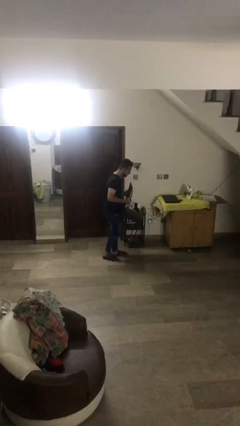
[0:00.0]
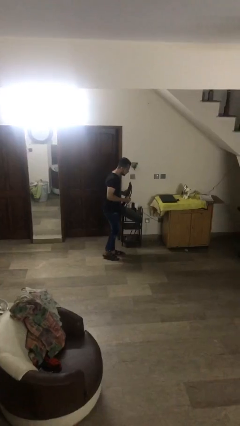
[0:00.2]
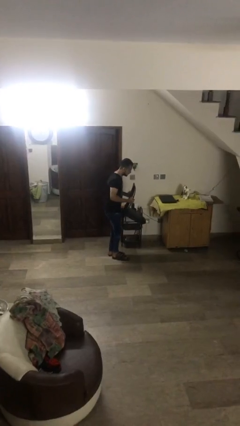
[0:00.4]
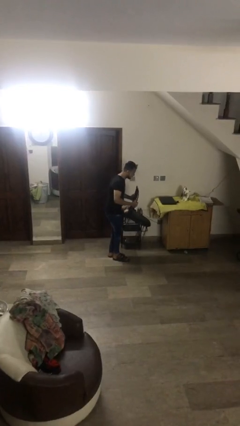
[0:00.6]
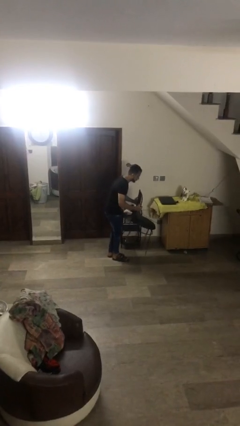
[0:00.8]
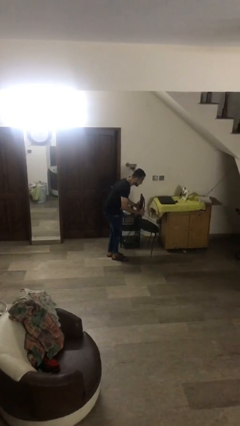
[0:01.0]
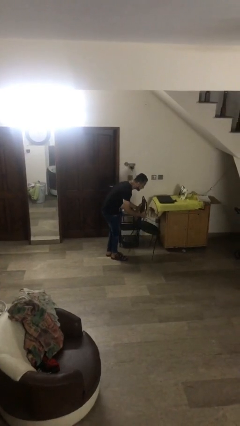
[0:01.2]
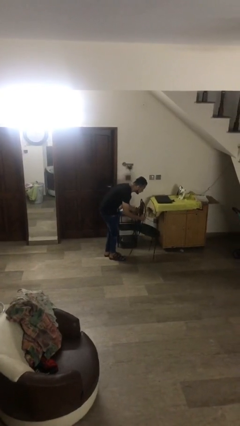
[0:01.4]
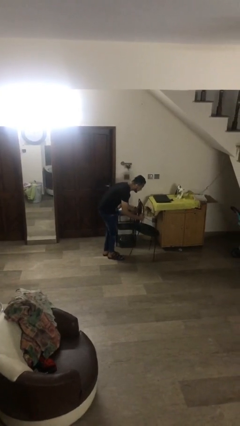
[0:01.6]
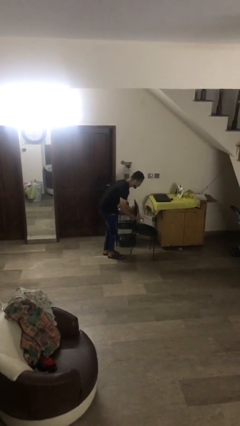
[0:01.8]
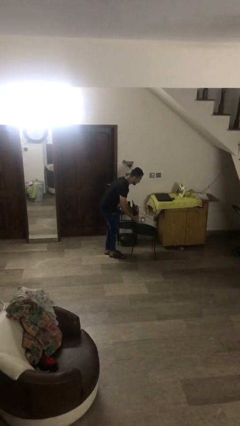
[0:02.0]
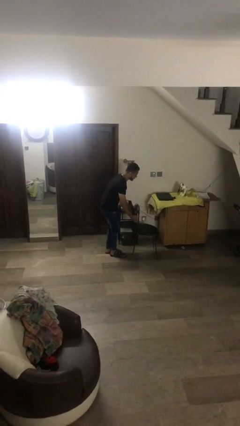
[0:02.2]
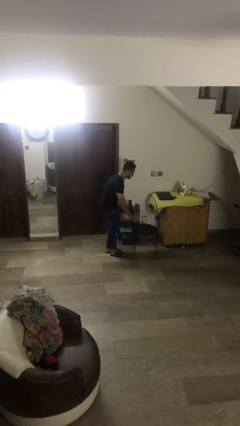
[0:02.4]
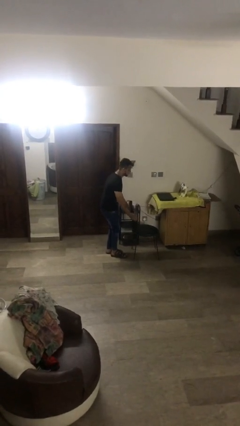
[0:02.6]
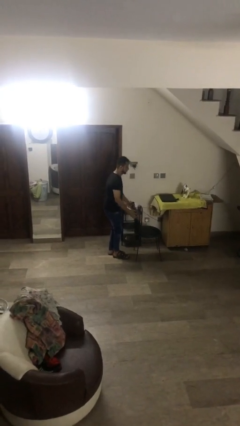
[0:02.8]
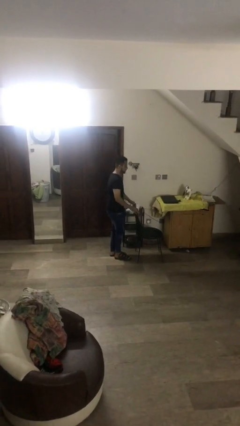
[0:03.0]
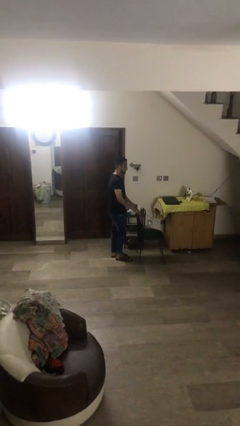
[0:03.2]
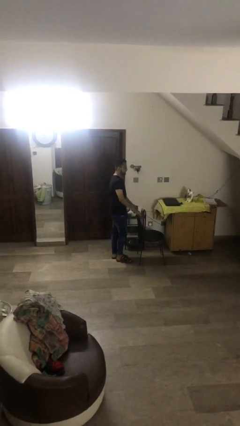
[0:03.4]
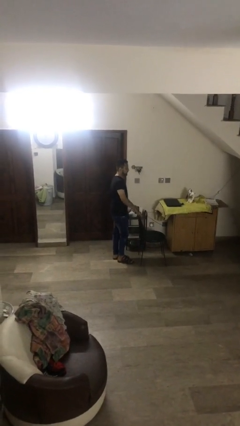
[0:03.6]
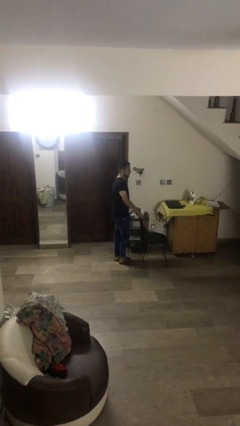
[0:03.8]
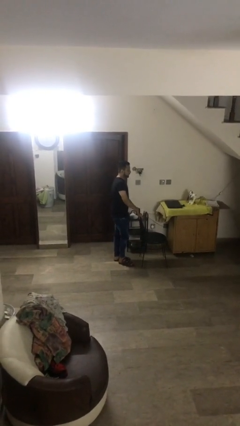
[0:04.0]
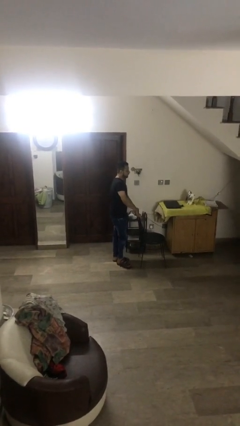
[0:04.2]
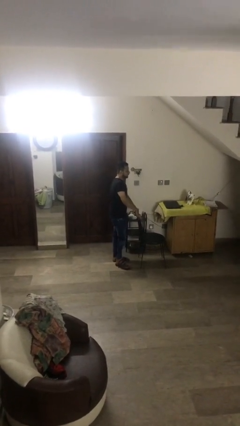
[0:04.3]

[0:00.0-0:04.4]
person puts down object on floor

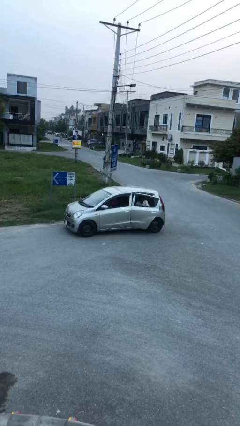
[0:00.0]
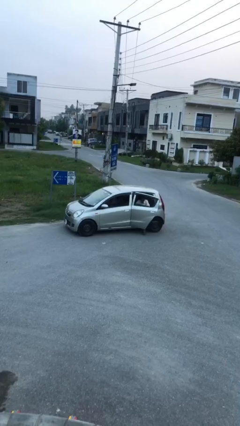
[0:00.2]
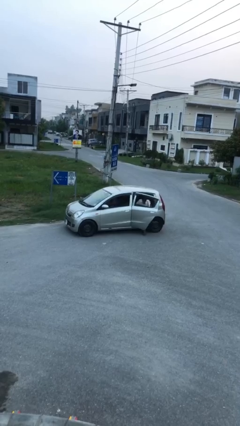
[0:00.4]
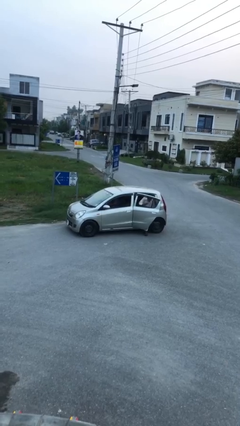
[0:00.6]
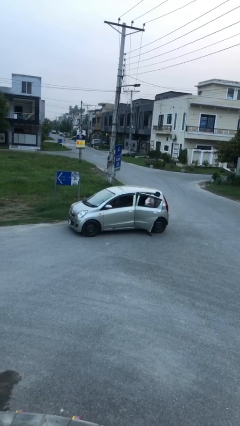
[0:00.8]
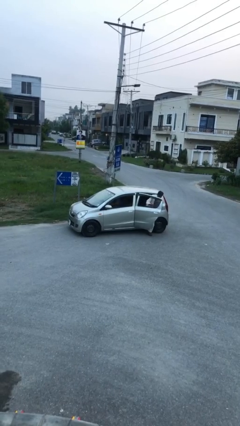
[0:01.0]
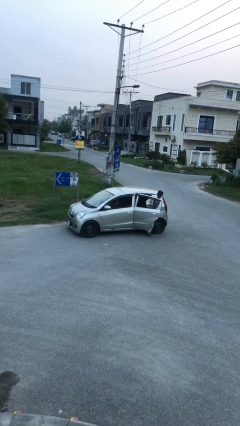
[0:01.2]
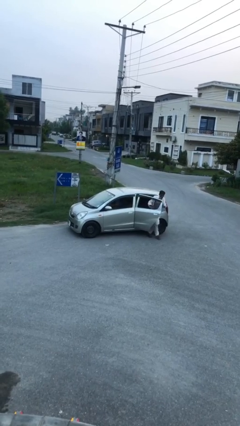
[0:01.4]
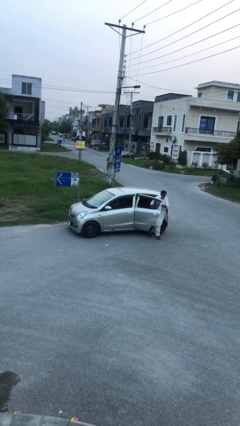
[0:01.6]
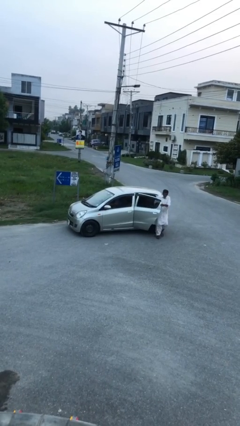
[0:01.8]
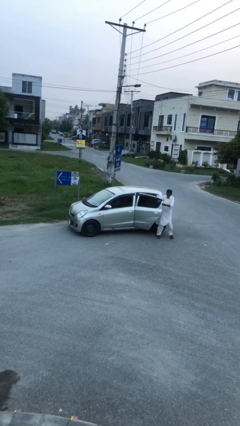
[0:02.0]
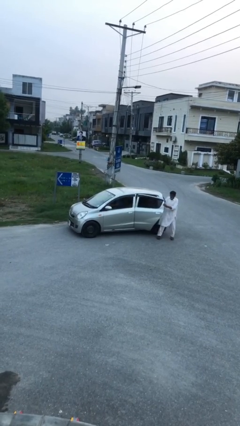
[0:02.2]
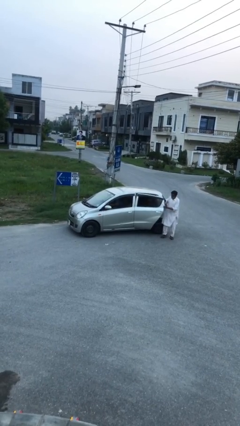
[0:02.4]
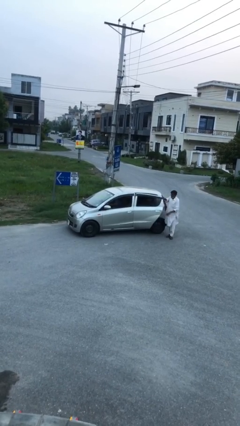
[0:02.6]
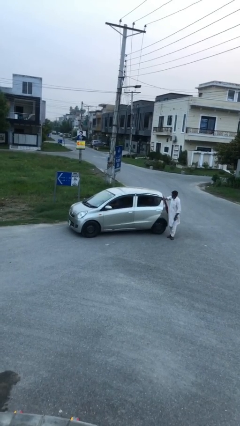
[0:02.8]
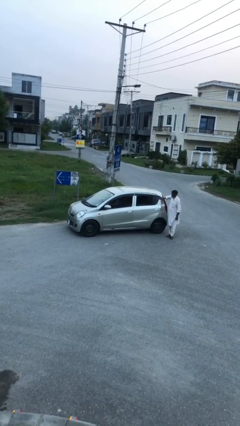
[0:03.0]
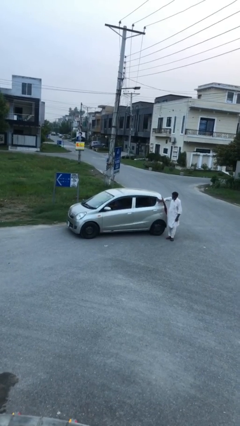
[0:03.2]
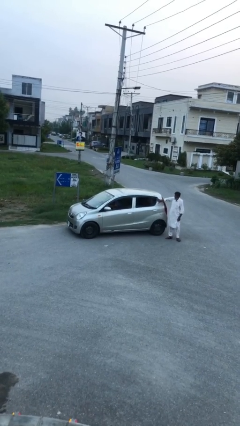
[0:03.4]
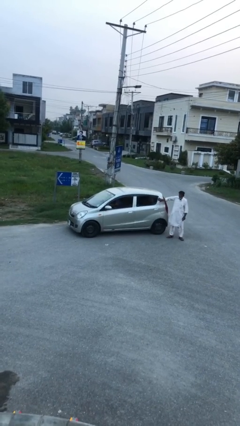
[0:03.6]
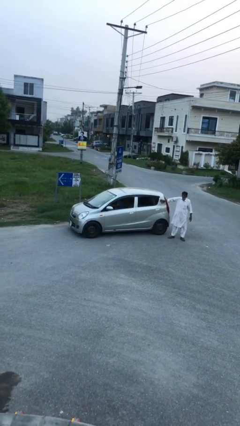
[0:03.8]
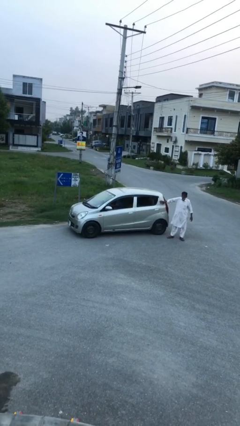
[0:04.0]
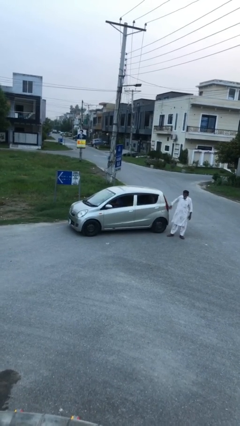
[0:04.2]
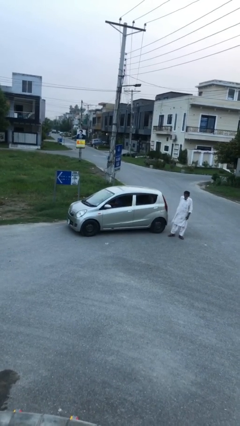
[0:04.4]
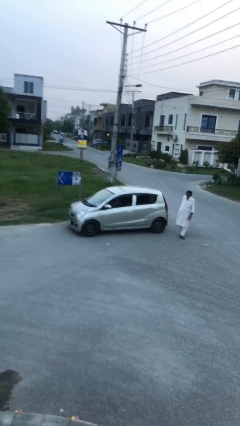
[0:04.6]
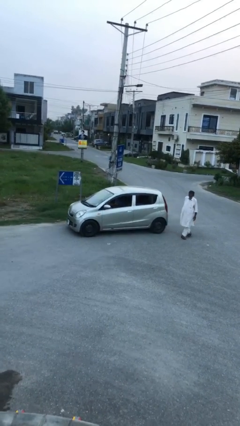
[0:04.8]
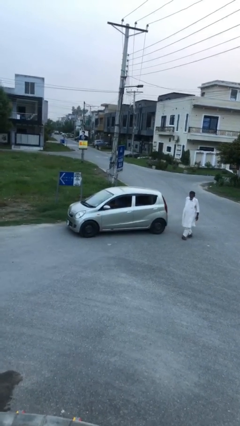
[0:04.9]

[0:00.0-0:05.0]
car drops off person

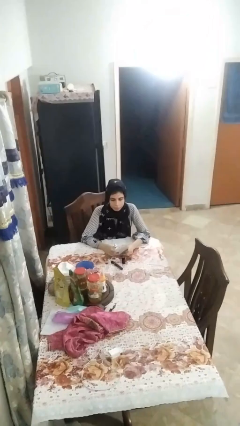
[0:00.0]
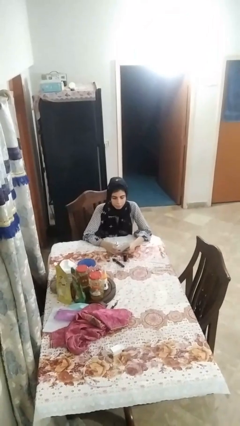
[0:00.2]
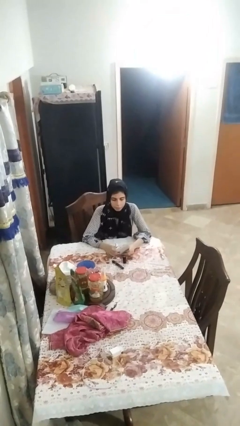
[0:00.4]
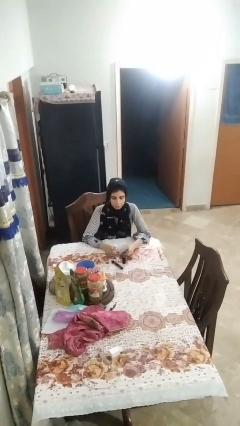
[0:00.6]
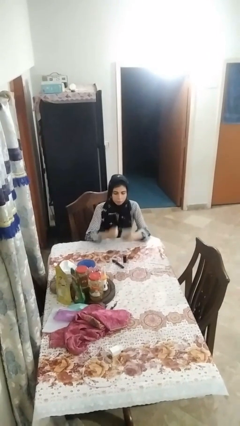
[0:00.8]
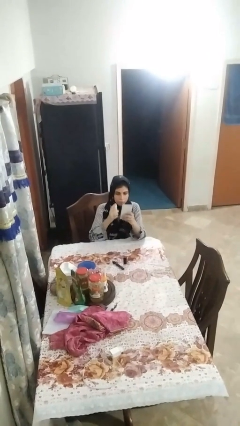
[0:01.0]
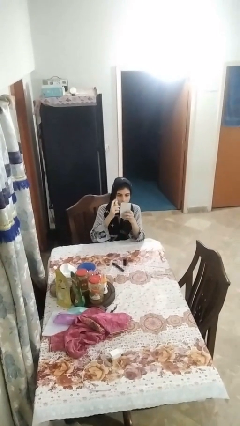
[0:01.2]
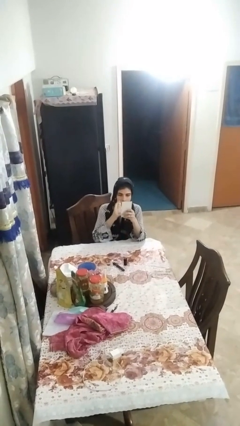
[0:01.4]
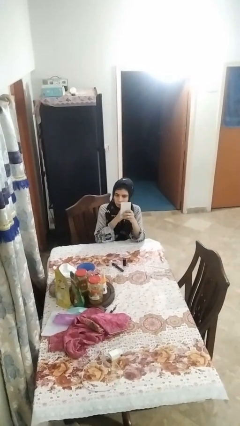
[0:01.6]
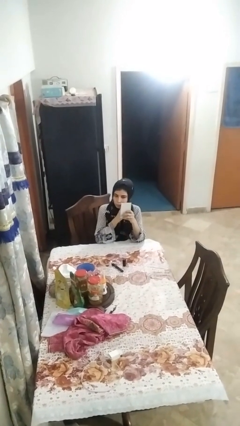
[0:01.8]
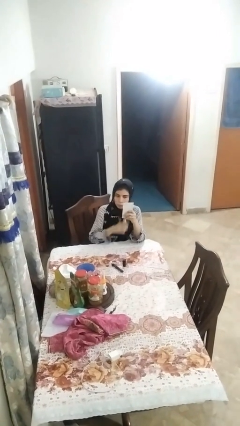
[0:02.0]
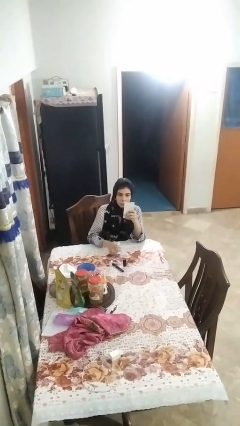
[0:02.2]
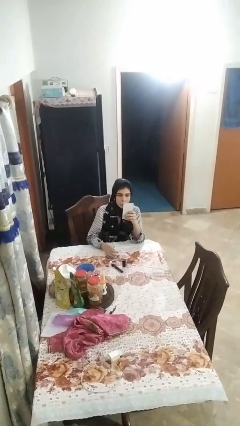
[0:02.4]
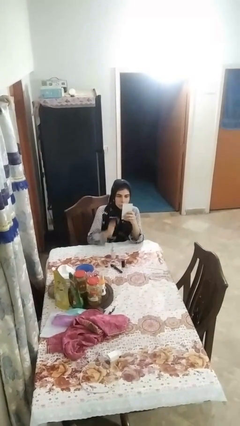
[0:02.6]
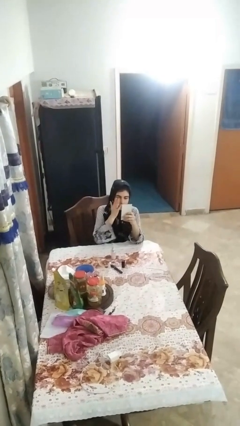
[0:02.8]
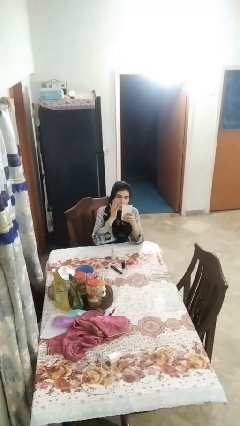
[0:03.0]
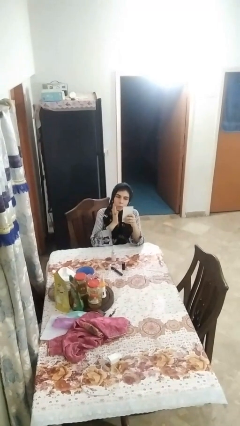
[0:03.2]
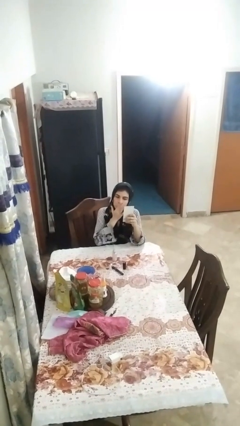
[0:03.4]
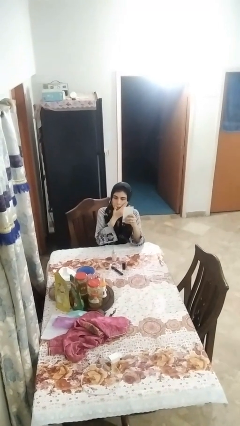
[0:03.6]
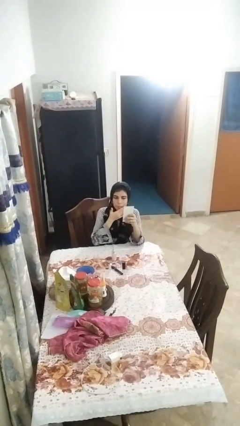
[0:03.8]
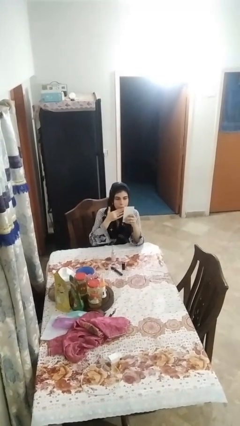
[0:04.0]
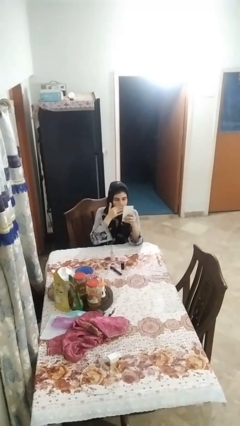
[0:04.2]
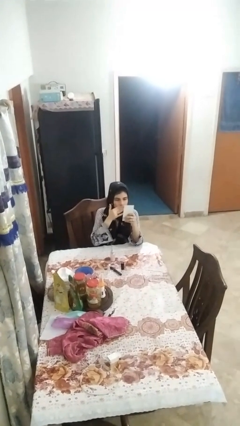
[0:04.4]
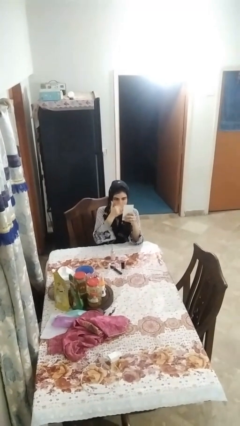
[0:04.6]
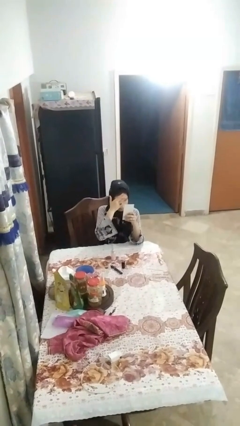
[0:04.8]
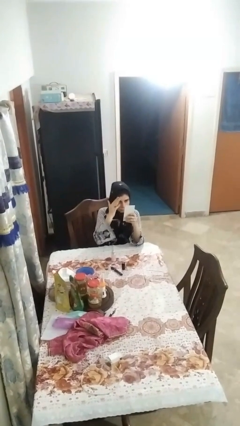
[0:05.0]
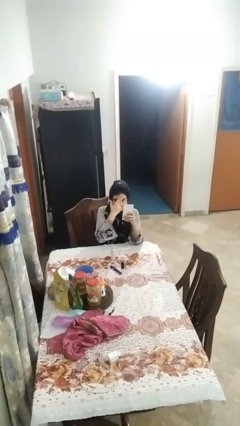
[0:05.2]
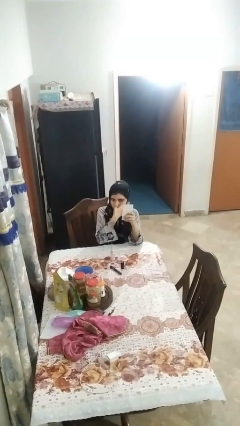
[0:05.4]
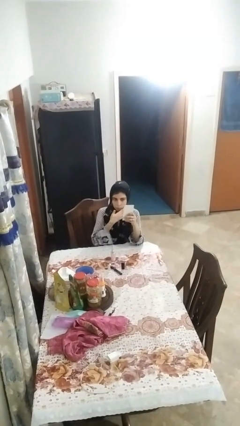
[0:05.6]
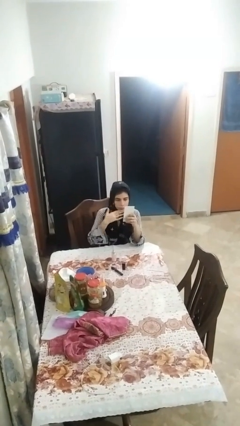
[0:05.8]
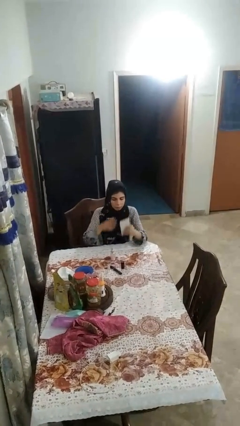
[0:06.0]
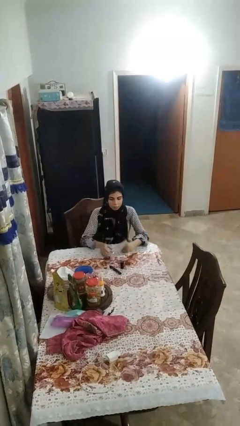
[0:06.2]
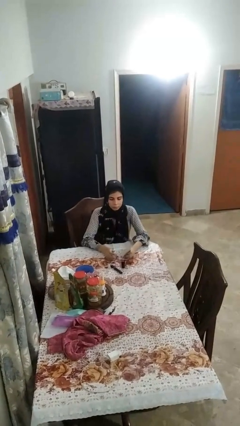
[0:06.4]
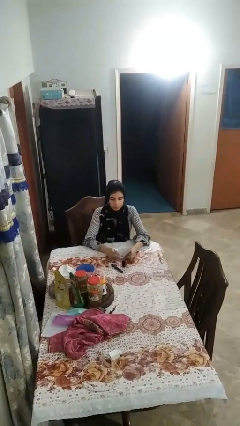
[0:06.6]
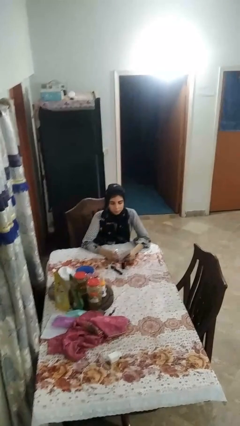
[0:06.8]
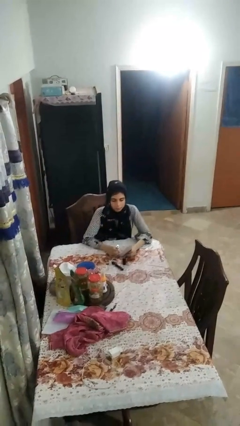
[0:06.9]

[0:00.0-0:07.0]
person applies foundation makeup

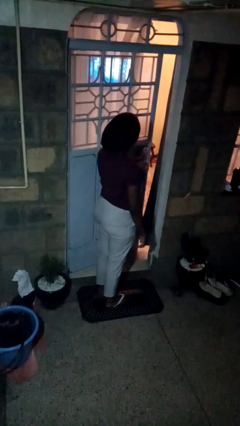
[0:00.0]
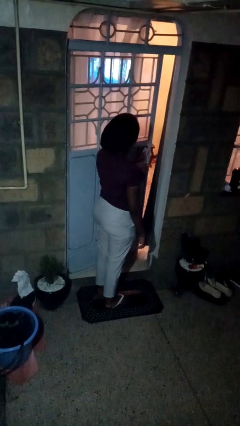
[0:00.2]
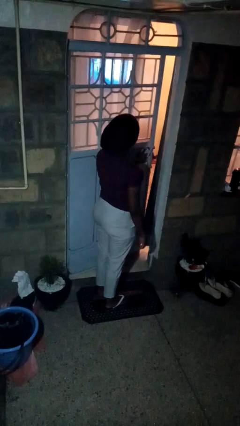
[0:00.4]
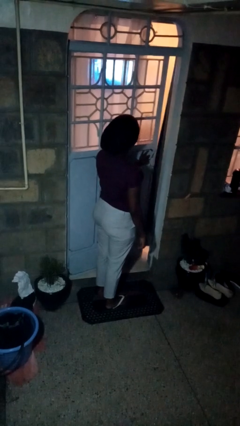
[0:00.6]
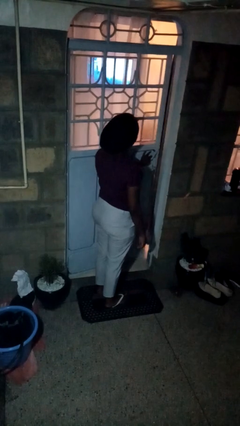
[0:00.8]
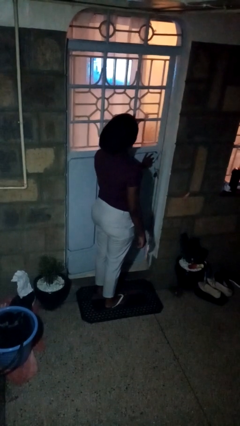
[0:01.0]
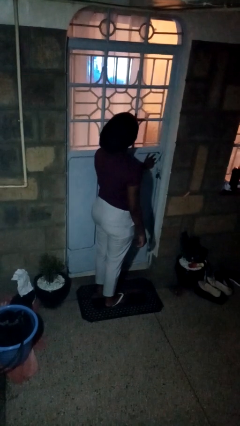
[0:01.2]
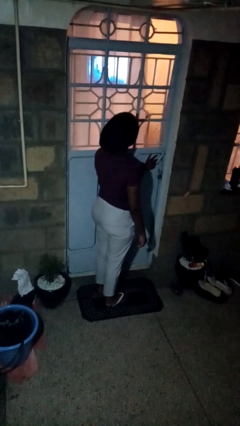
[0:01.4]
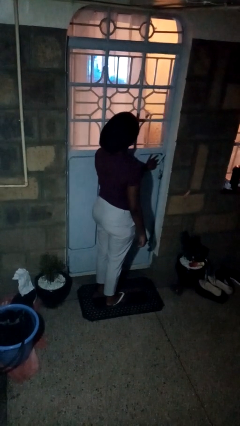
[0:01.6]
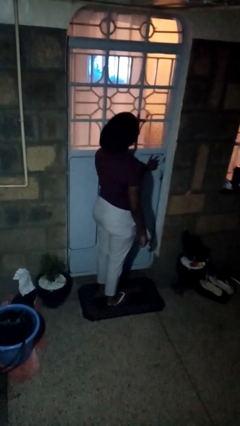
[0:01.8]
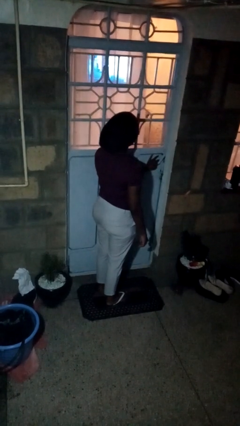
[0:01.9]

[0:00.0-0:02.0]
person closes facility door
